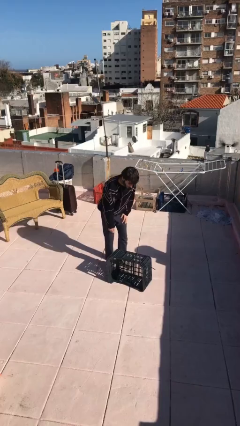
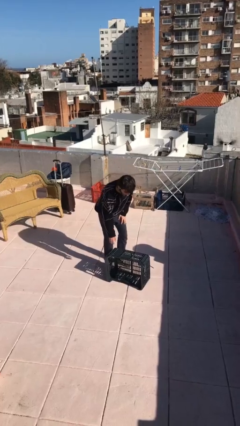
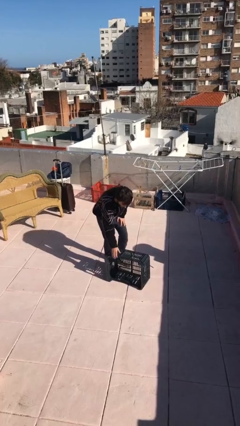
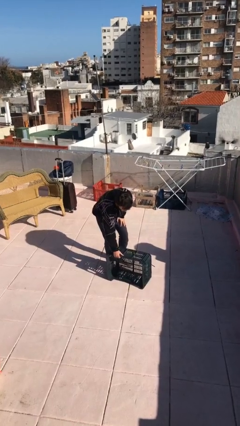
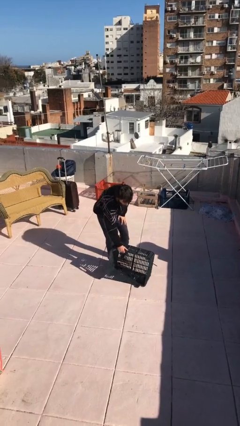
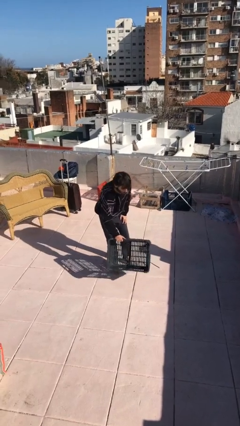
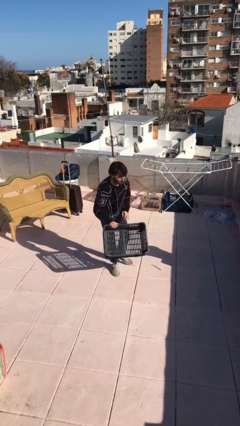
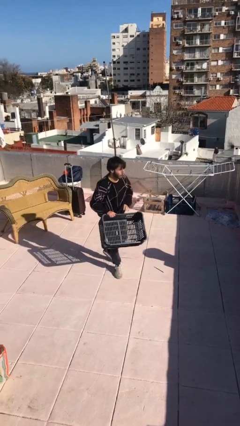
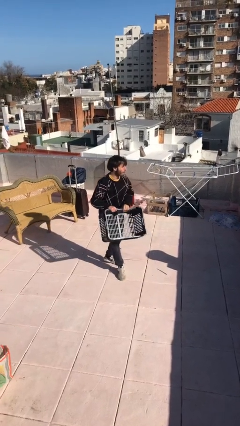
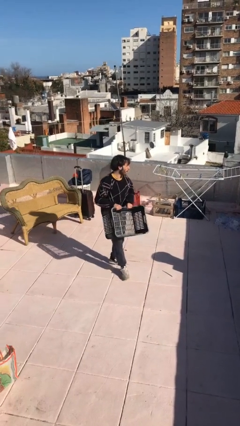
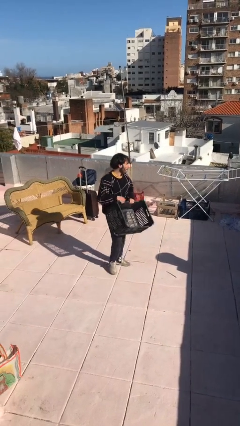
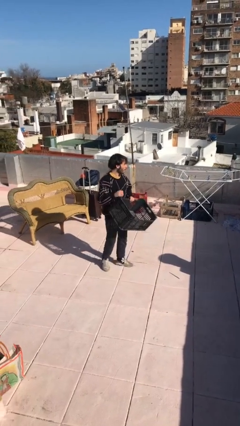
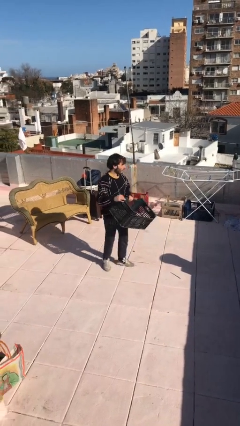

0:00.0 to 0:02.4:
person picks up object from floor

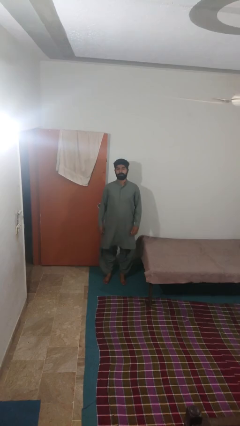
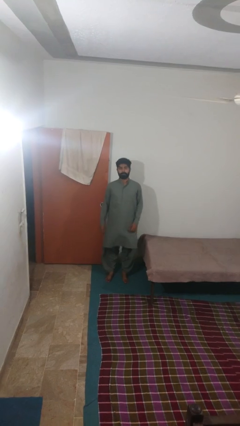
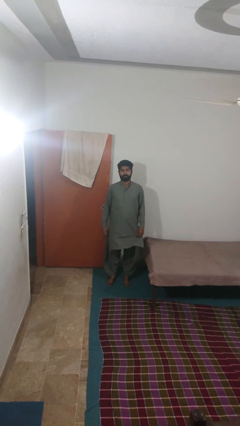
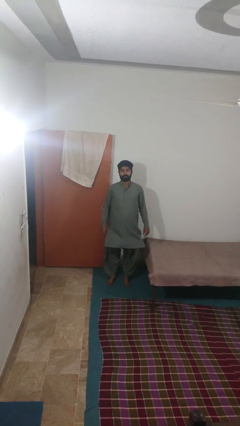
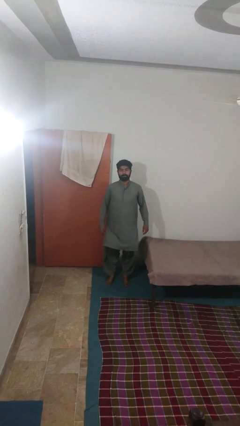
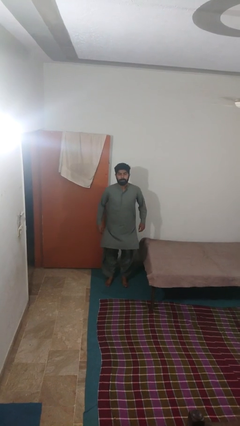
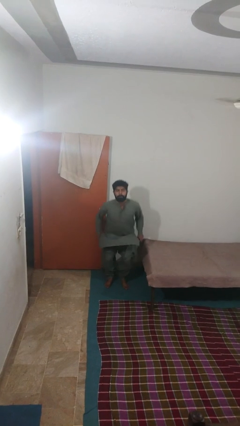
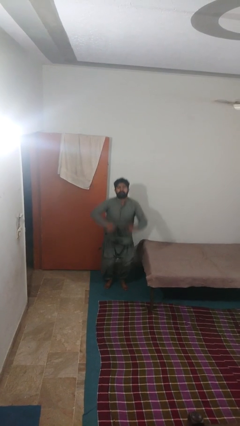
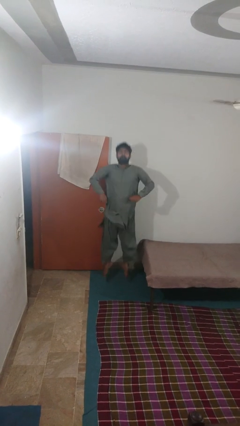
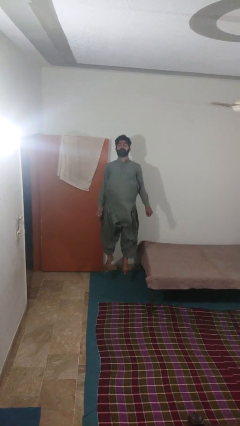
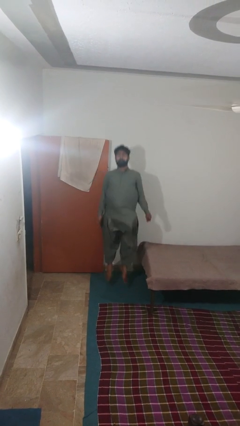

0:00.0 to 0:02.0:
person jumps

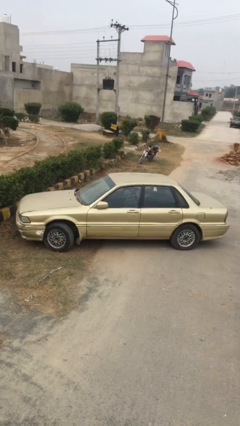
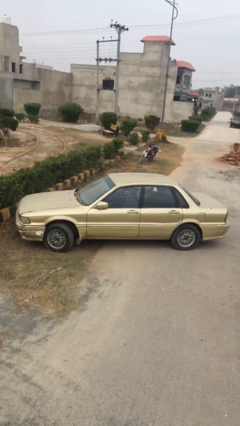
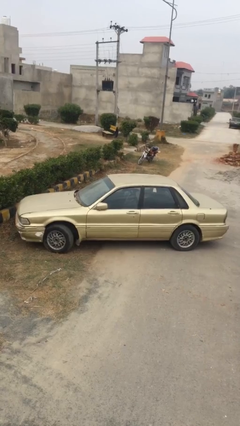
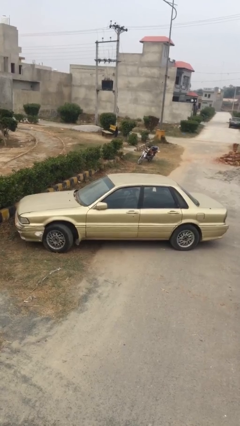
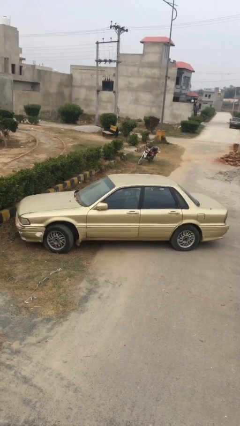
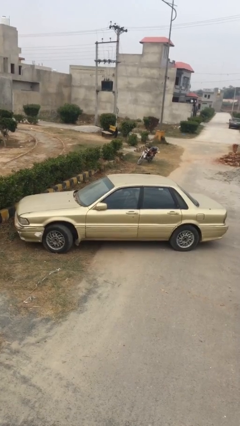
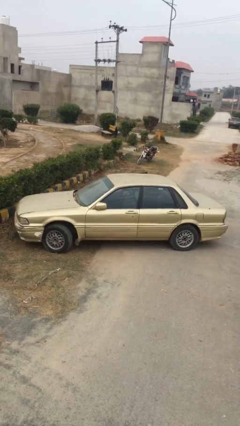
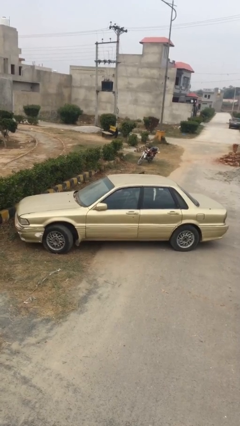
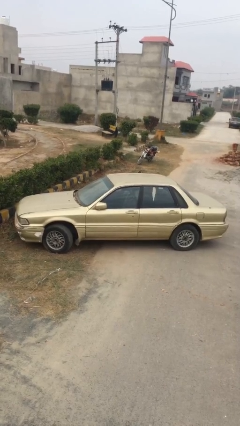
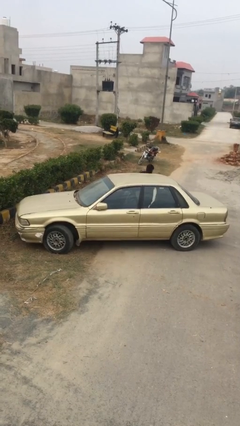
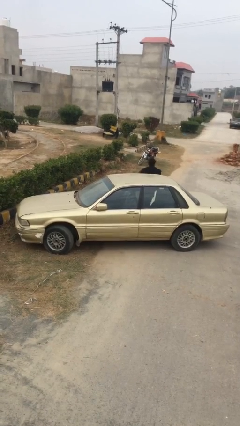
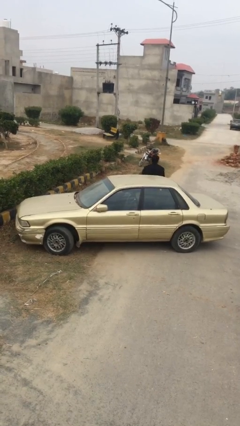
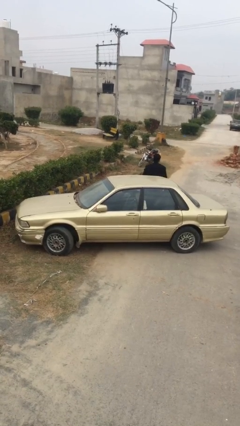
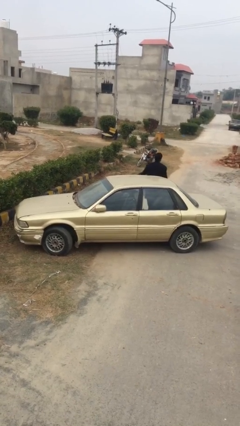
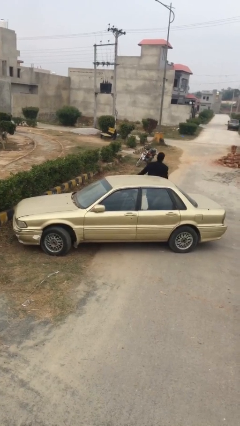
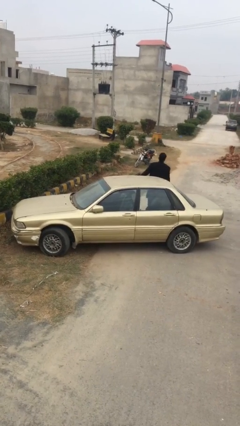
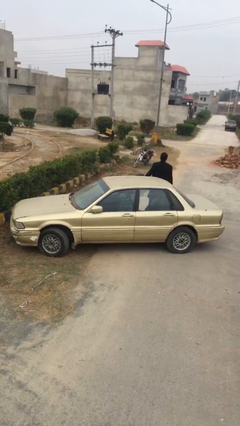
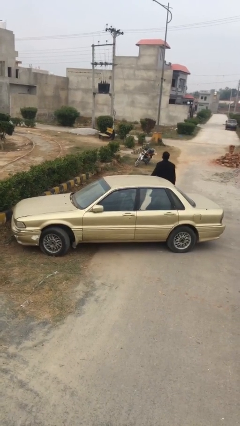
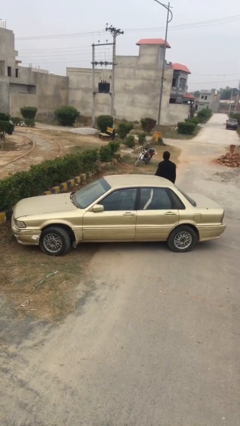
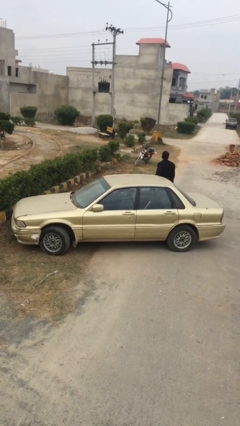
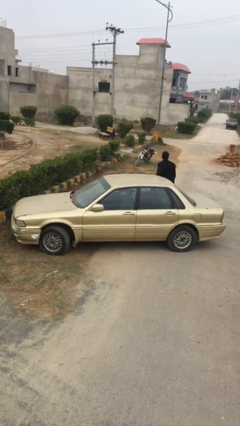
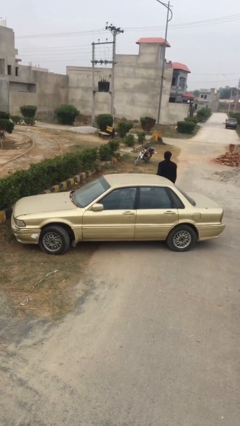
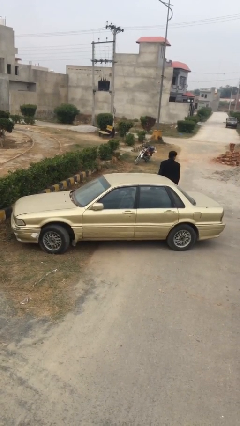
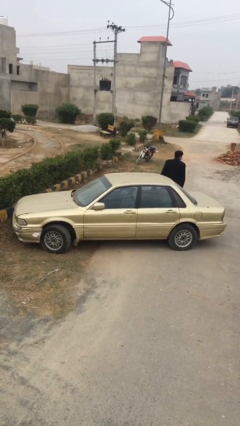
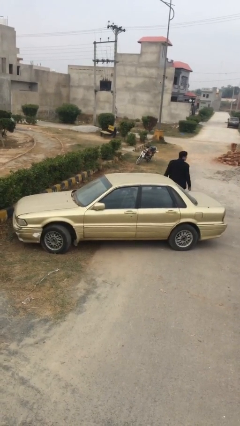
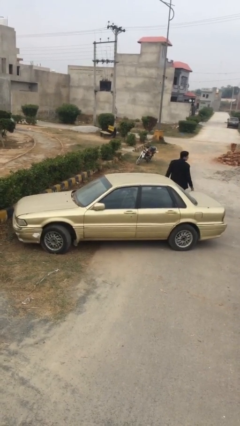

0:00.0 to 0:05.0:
car drops off person

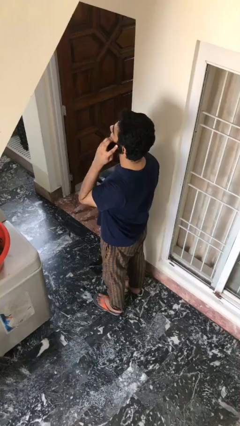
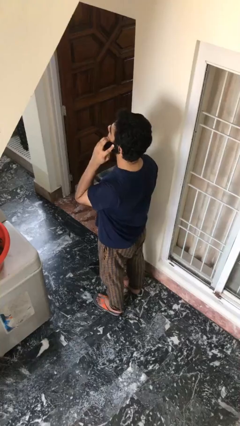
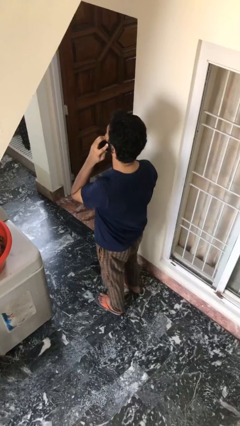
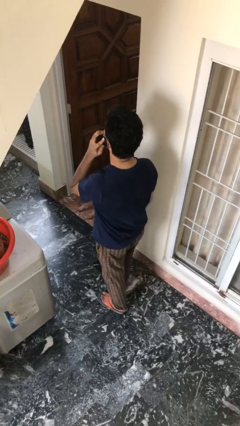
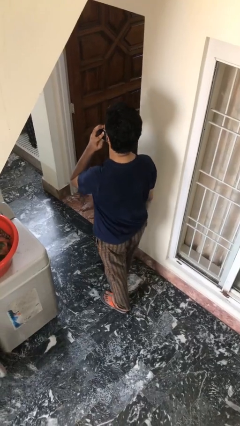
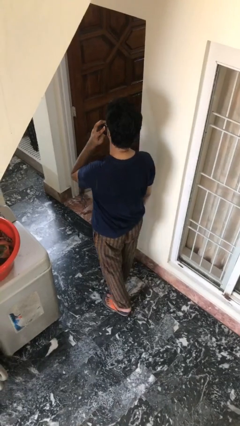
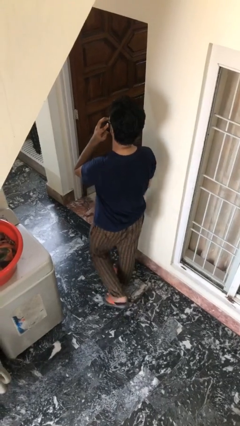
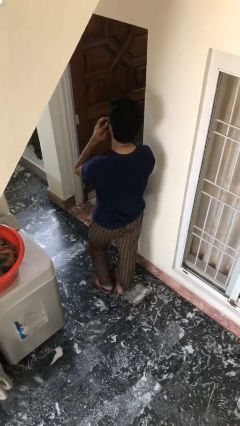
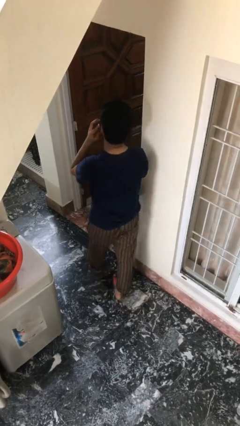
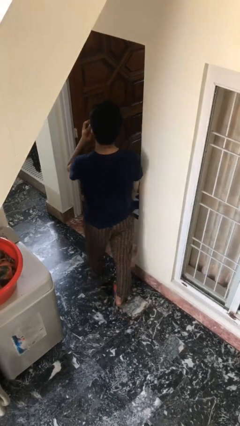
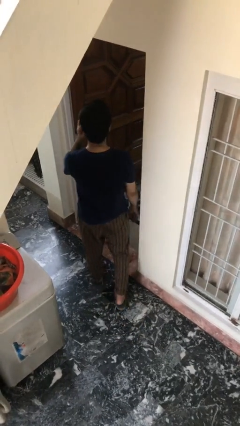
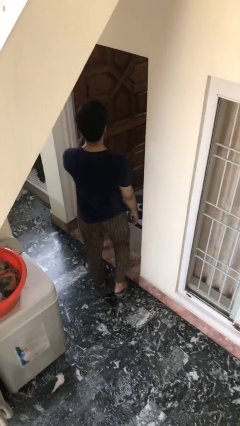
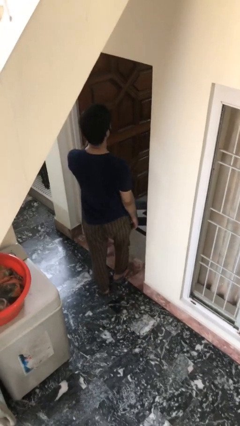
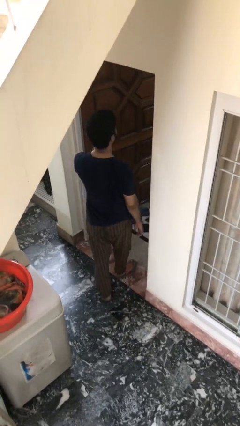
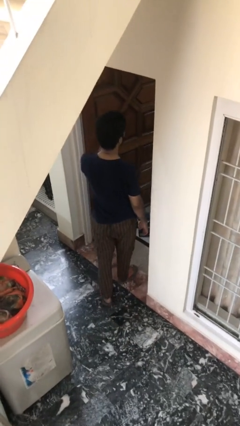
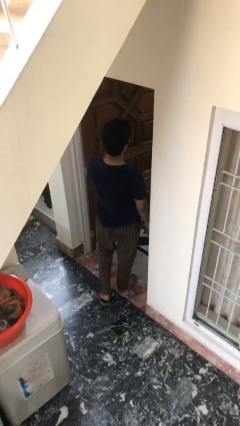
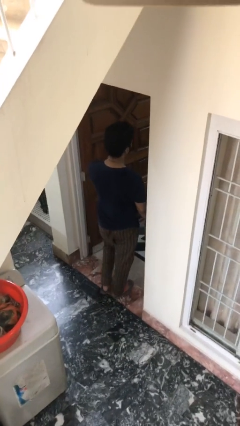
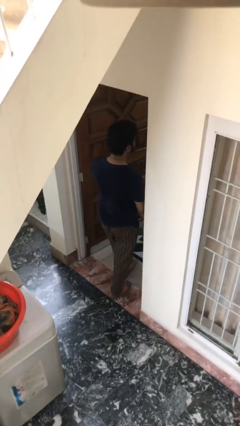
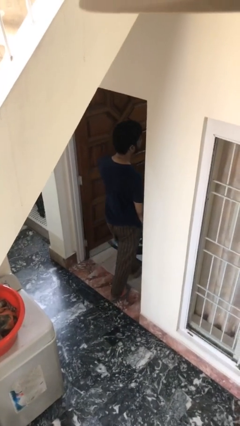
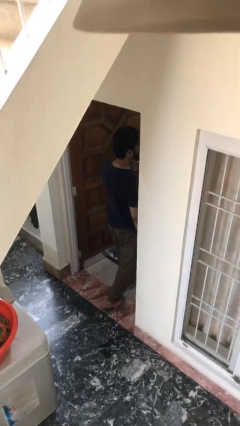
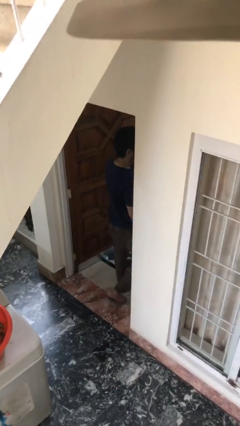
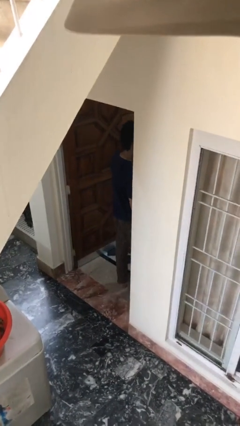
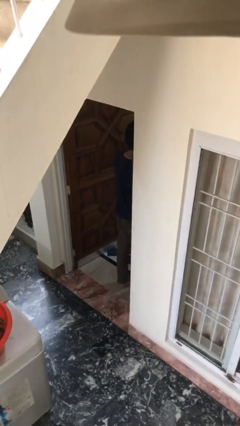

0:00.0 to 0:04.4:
person exits scene through structure

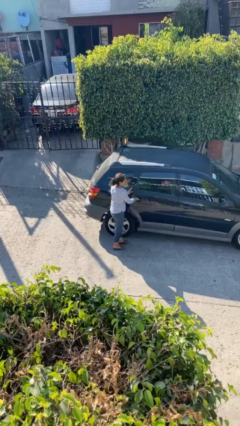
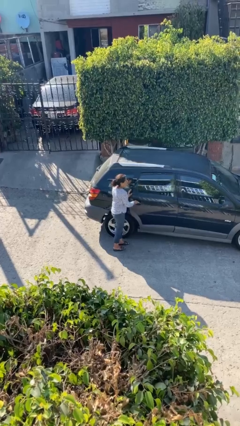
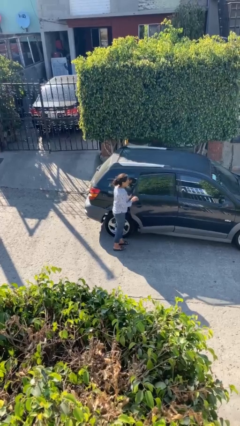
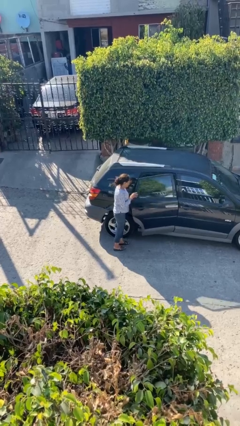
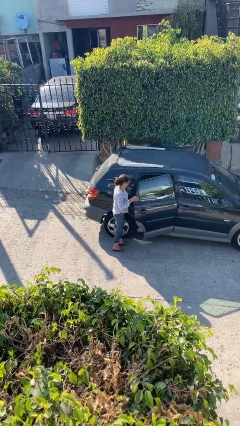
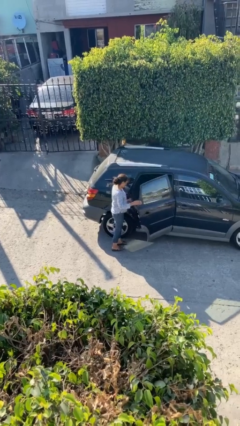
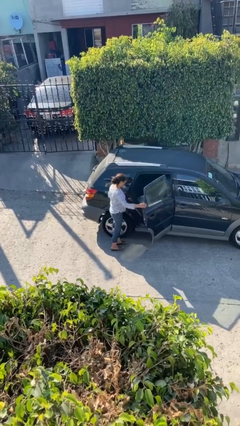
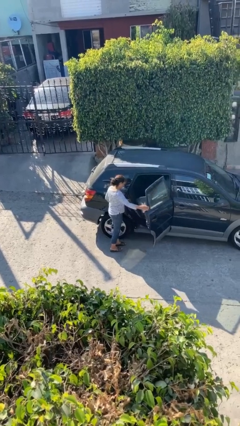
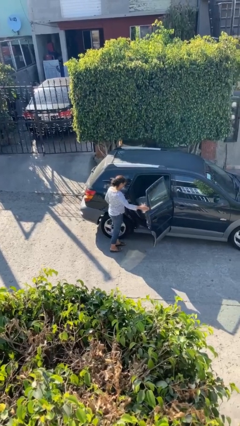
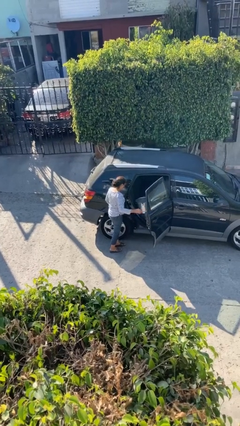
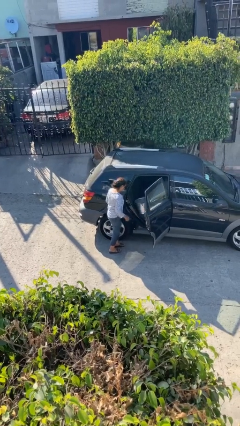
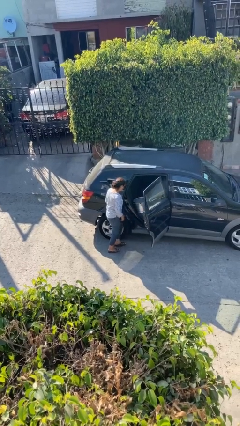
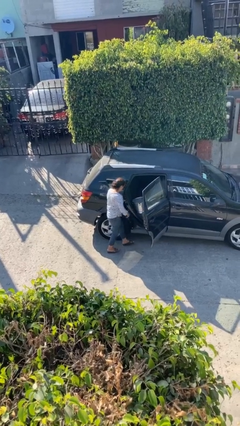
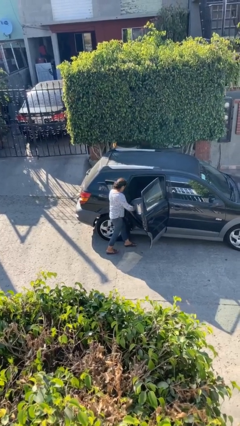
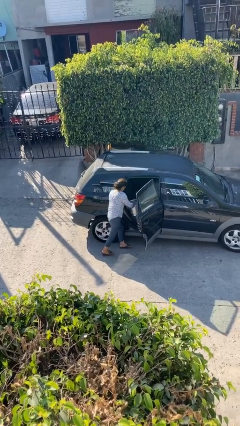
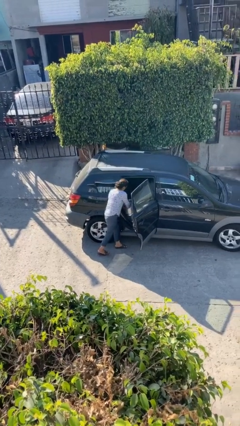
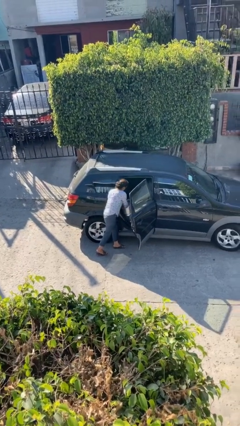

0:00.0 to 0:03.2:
person opens car door

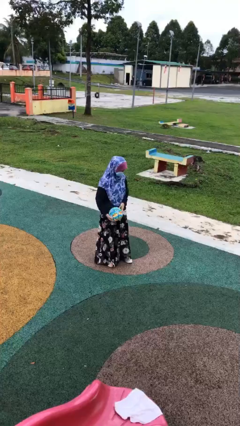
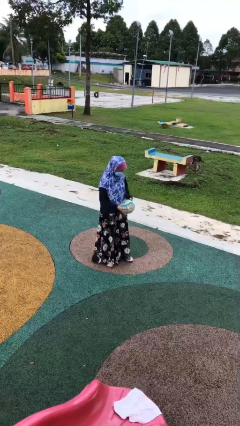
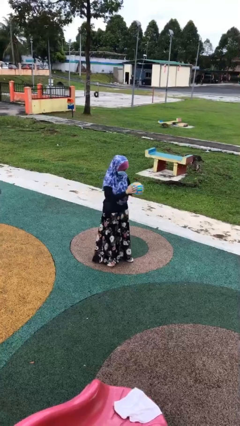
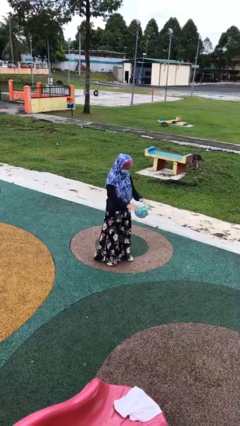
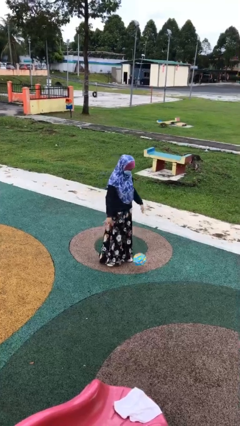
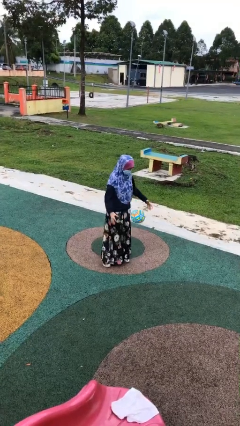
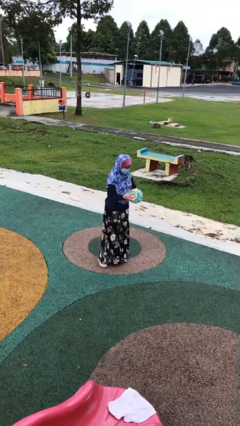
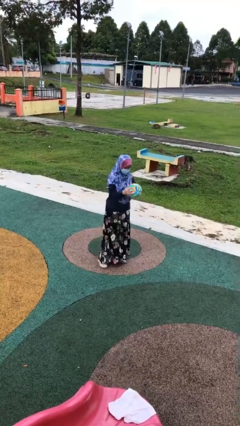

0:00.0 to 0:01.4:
person bounces ball on floor
